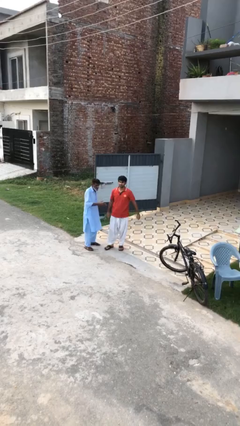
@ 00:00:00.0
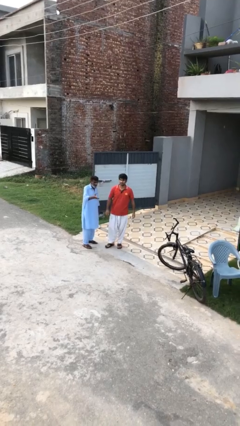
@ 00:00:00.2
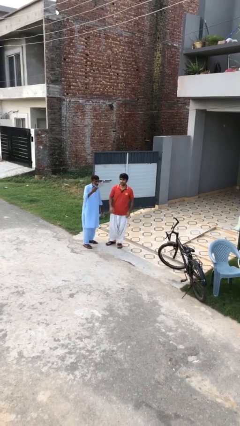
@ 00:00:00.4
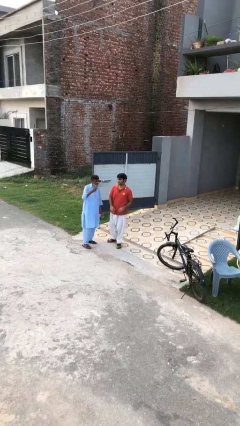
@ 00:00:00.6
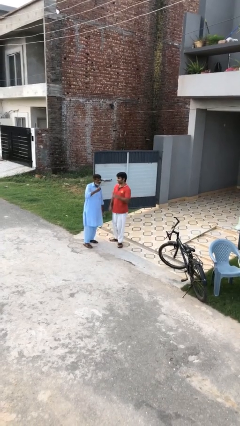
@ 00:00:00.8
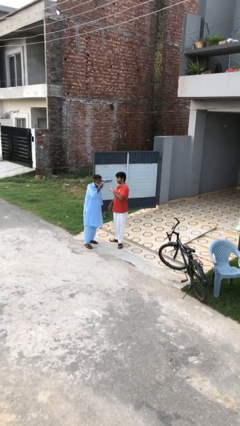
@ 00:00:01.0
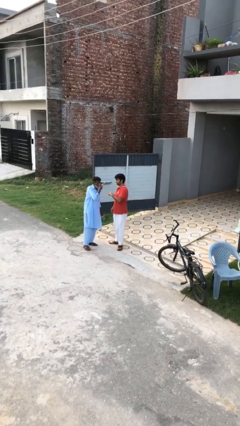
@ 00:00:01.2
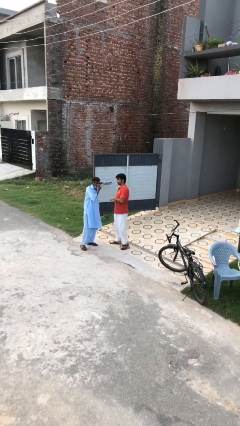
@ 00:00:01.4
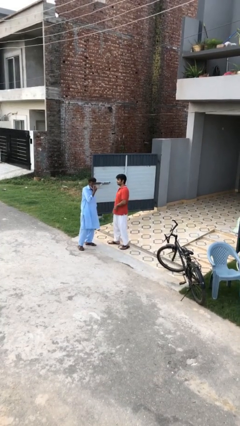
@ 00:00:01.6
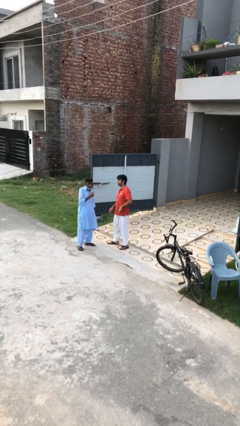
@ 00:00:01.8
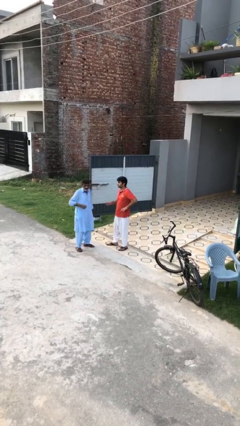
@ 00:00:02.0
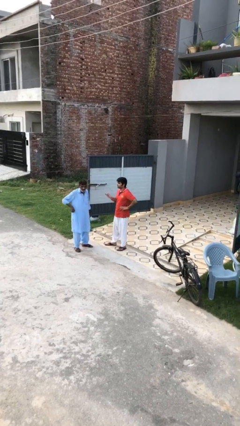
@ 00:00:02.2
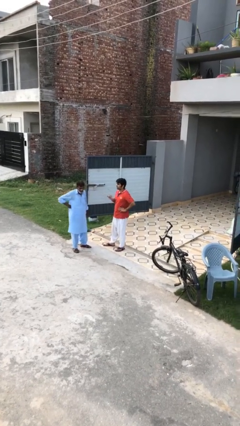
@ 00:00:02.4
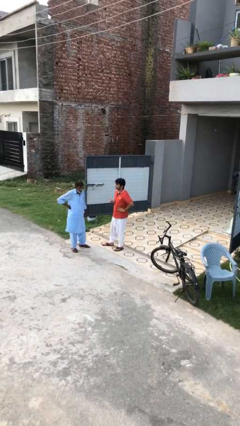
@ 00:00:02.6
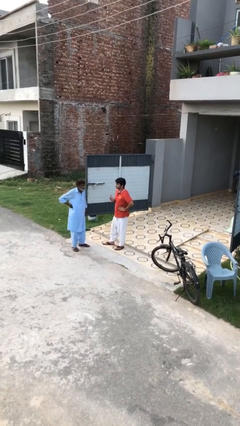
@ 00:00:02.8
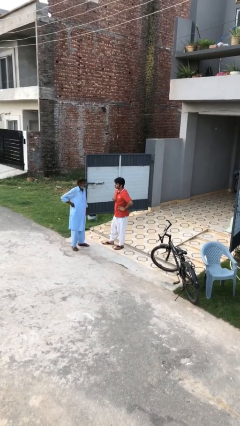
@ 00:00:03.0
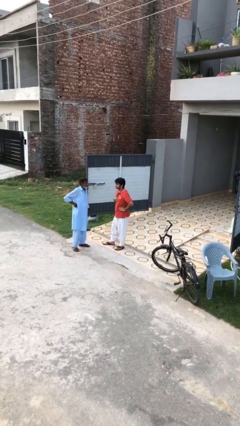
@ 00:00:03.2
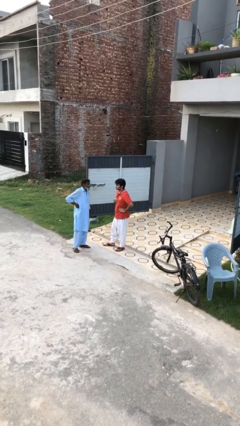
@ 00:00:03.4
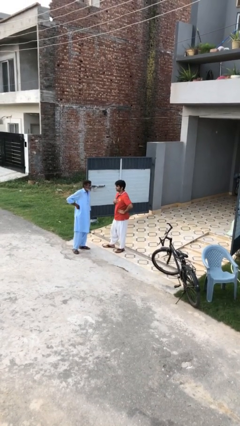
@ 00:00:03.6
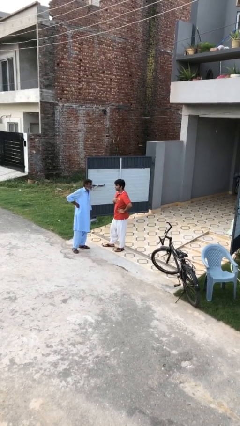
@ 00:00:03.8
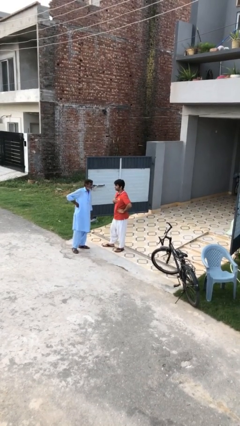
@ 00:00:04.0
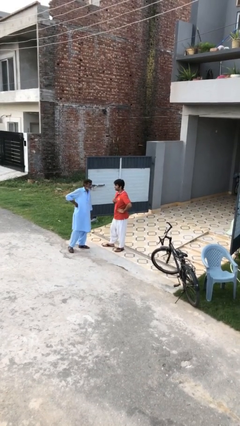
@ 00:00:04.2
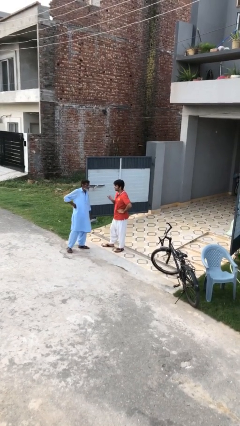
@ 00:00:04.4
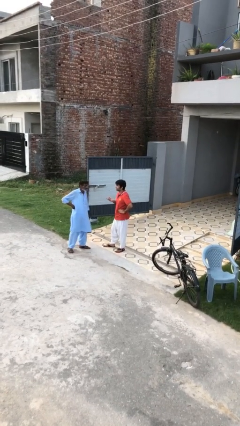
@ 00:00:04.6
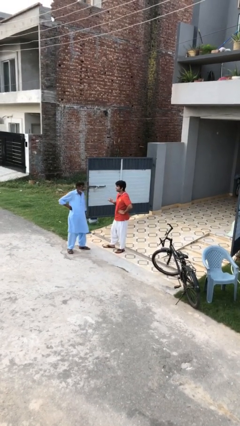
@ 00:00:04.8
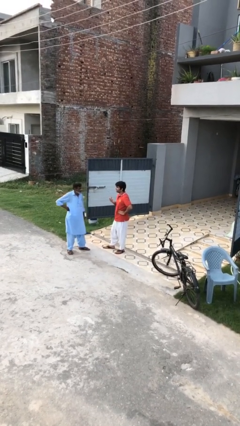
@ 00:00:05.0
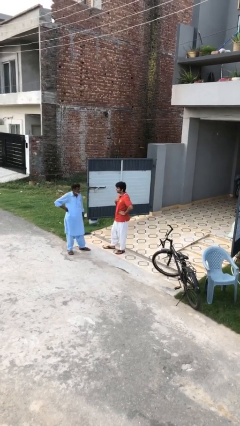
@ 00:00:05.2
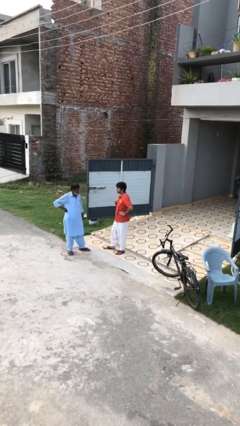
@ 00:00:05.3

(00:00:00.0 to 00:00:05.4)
person talks to person

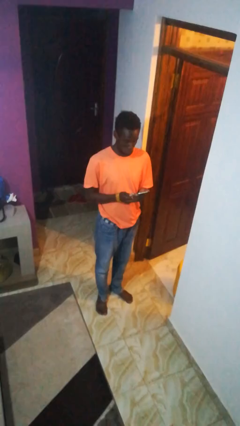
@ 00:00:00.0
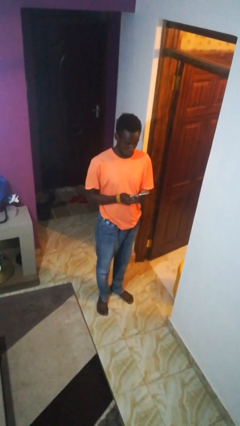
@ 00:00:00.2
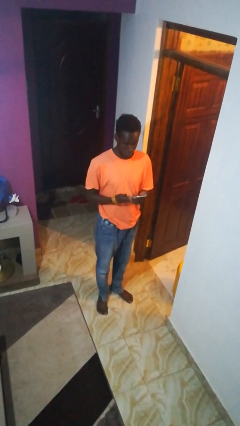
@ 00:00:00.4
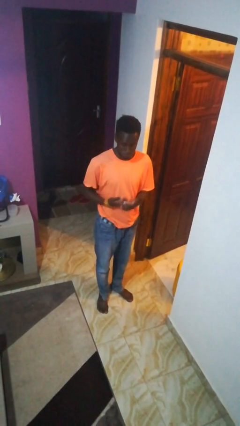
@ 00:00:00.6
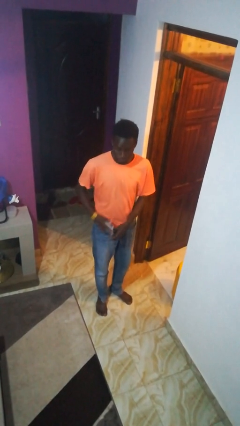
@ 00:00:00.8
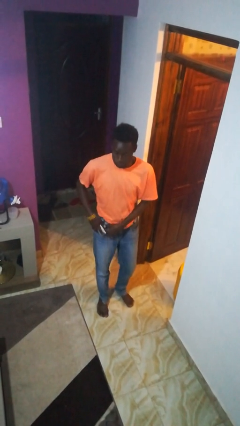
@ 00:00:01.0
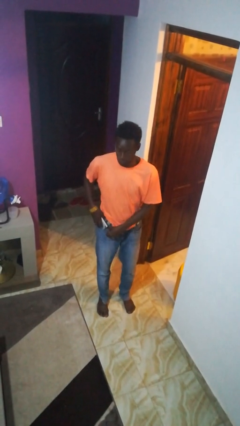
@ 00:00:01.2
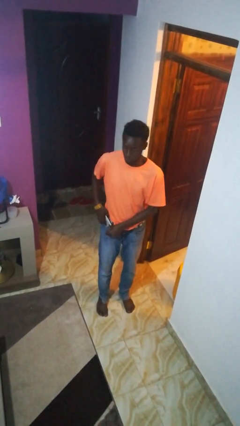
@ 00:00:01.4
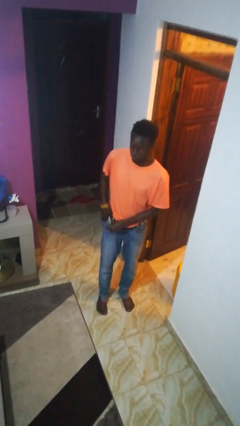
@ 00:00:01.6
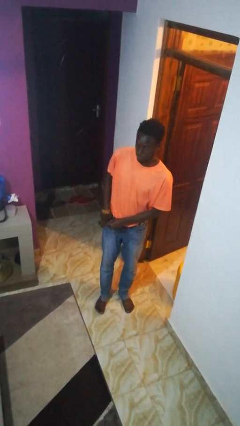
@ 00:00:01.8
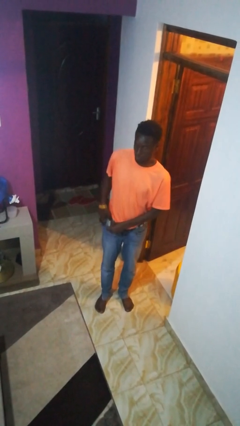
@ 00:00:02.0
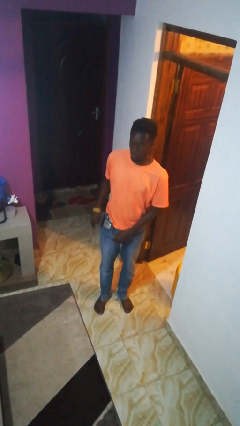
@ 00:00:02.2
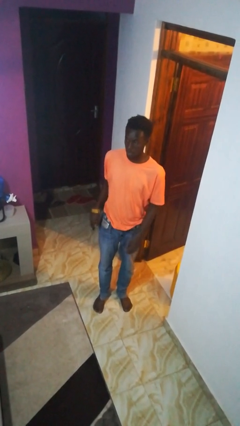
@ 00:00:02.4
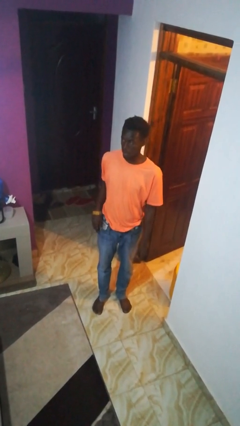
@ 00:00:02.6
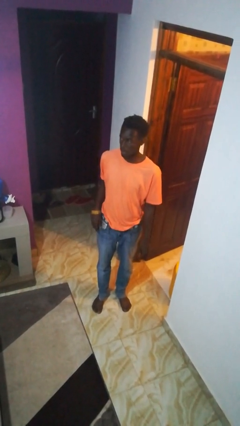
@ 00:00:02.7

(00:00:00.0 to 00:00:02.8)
person puts phone into pocket

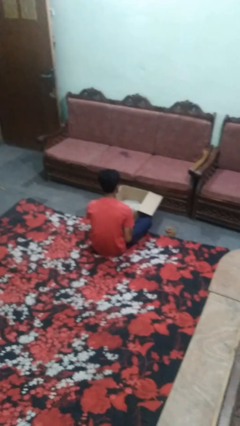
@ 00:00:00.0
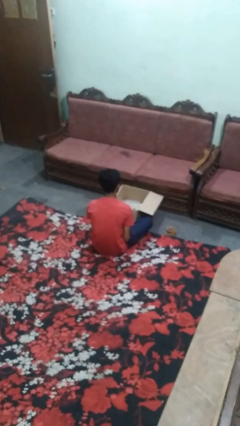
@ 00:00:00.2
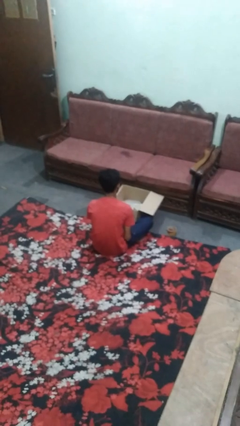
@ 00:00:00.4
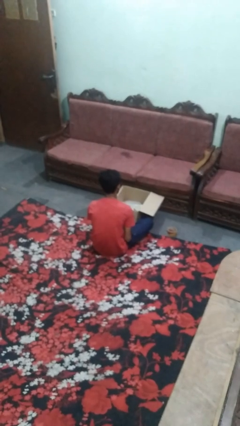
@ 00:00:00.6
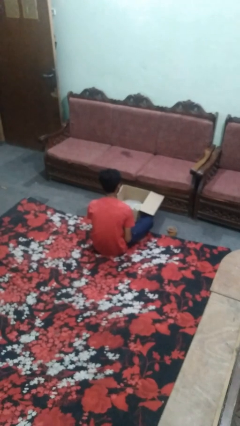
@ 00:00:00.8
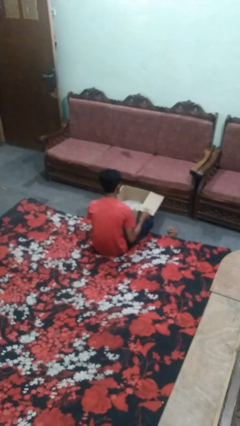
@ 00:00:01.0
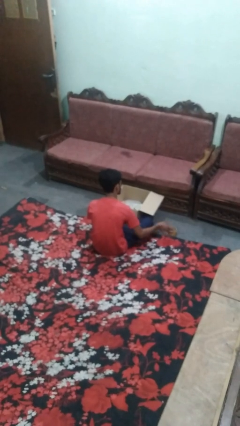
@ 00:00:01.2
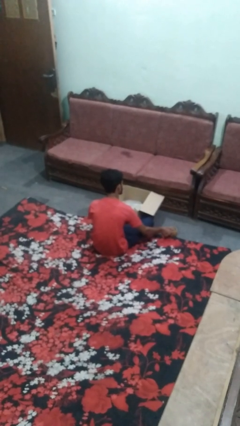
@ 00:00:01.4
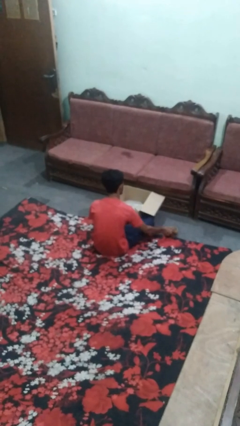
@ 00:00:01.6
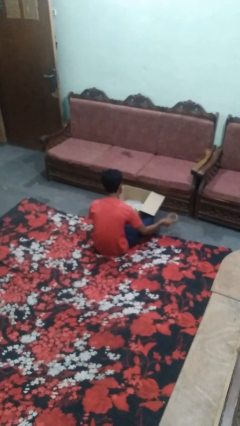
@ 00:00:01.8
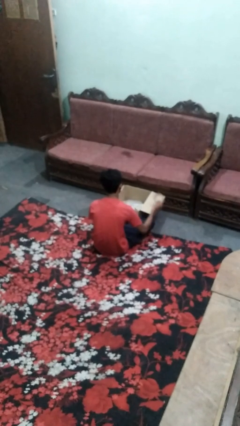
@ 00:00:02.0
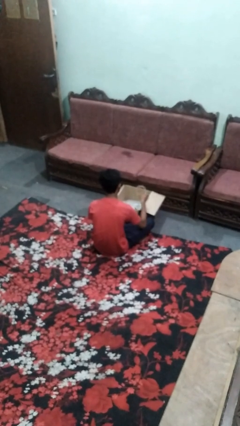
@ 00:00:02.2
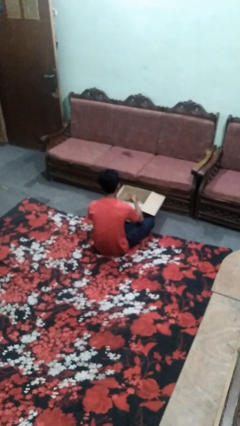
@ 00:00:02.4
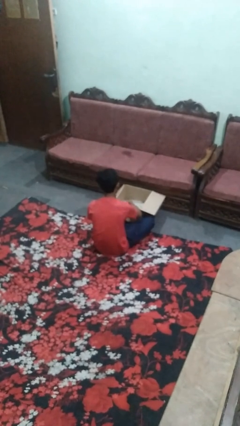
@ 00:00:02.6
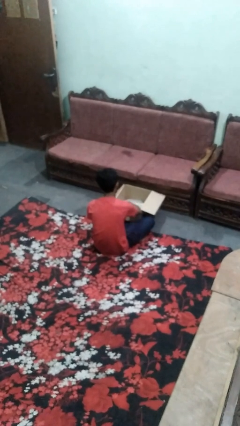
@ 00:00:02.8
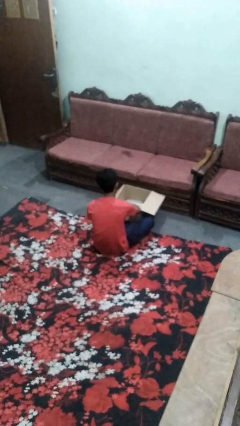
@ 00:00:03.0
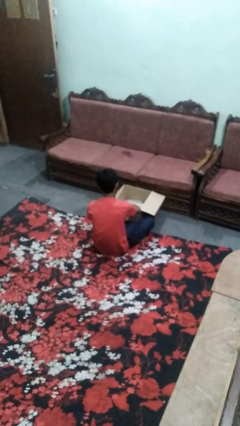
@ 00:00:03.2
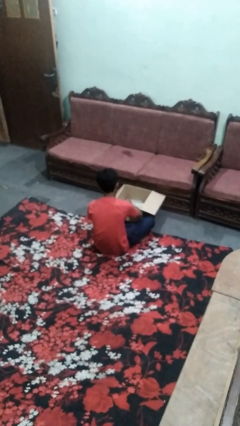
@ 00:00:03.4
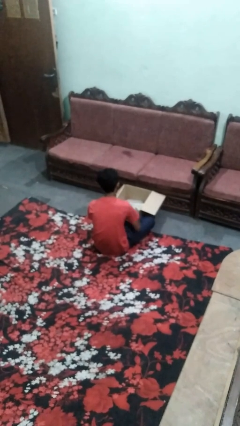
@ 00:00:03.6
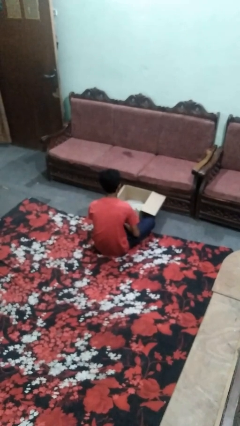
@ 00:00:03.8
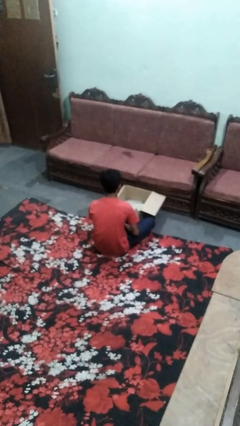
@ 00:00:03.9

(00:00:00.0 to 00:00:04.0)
person puts object into box

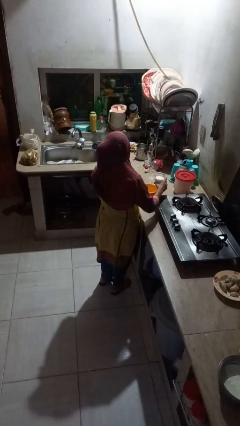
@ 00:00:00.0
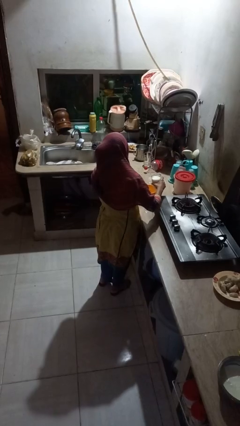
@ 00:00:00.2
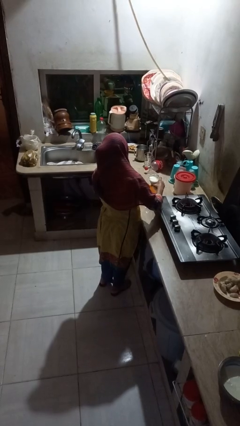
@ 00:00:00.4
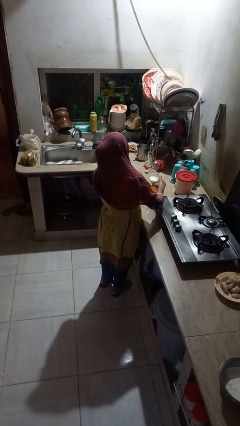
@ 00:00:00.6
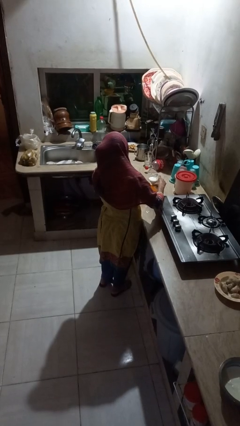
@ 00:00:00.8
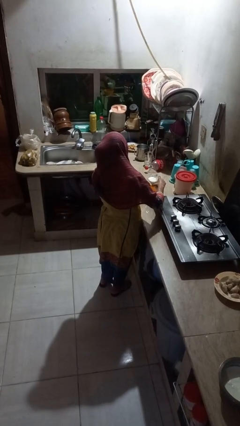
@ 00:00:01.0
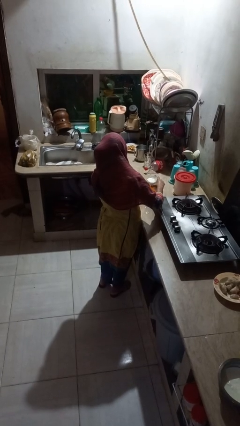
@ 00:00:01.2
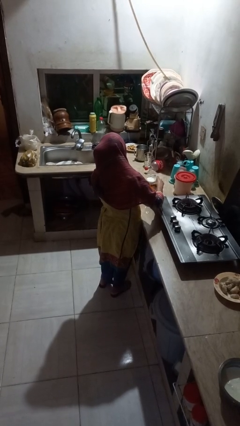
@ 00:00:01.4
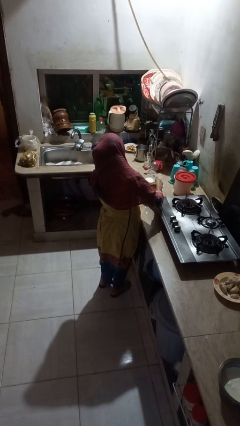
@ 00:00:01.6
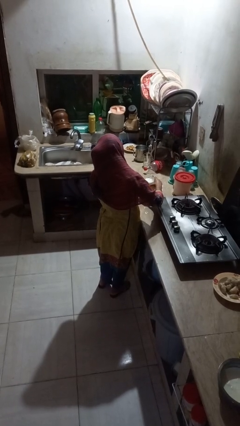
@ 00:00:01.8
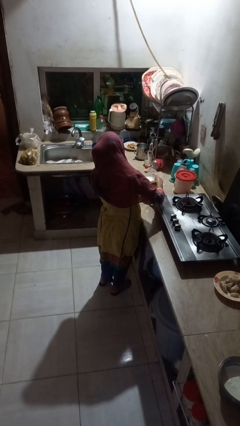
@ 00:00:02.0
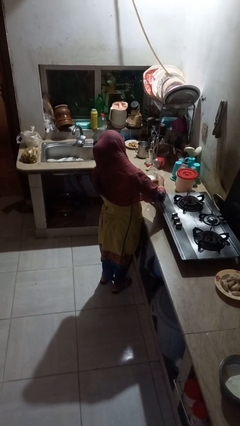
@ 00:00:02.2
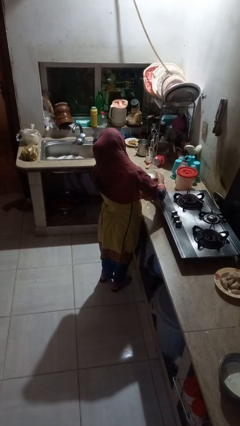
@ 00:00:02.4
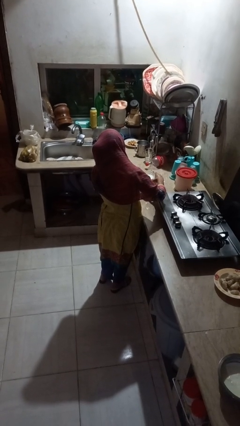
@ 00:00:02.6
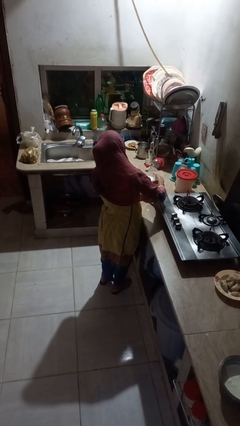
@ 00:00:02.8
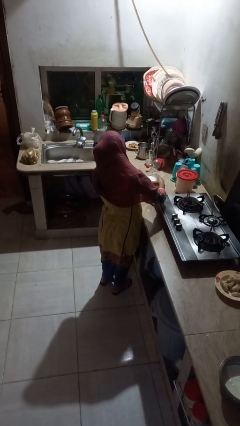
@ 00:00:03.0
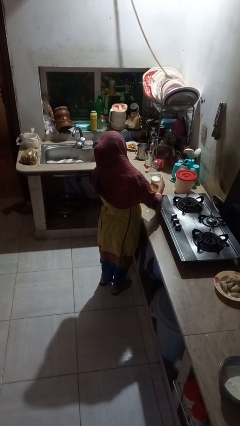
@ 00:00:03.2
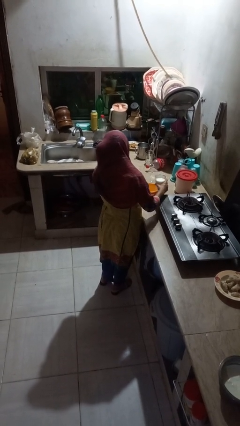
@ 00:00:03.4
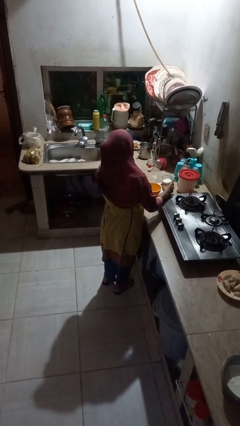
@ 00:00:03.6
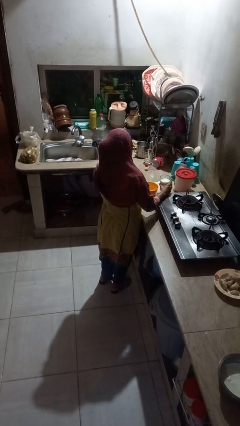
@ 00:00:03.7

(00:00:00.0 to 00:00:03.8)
person pours into bowl

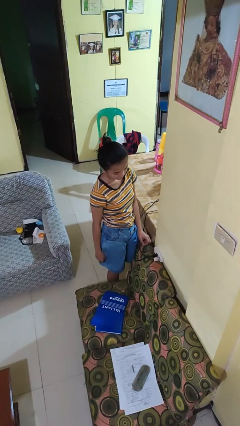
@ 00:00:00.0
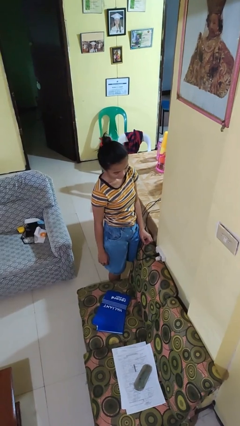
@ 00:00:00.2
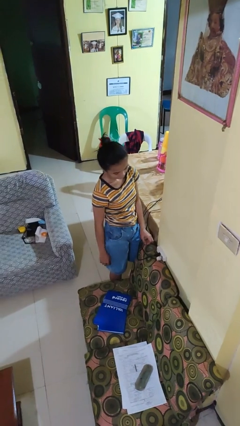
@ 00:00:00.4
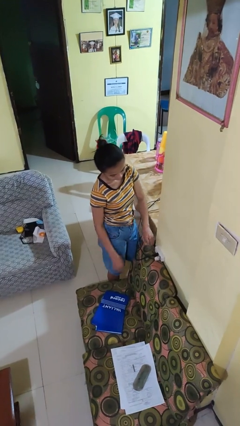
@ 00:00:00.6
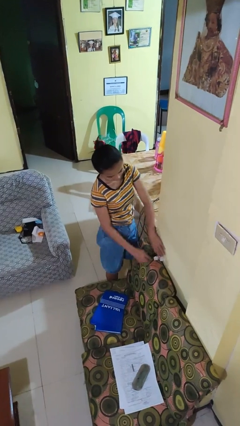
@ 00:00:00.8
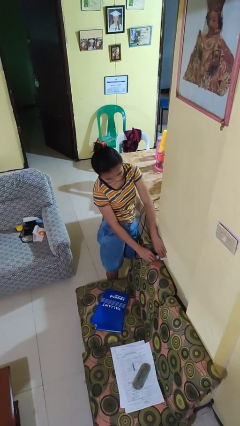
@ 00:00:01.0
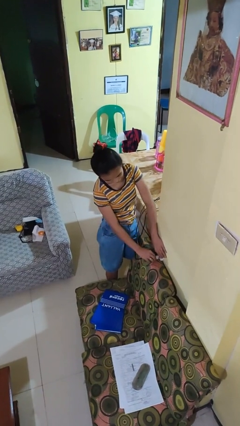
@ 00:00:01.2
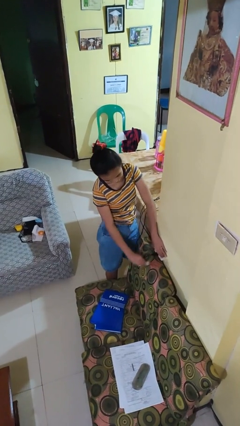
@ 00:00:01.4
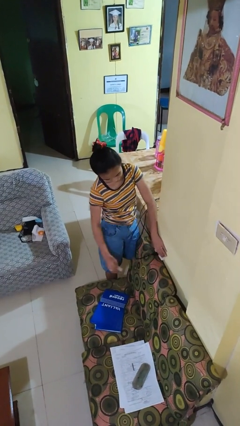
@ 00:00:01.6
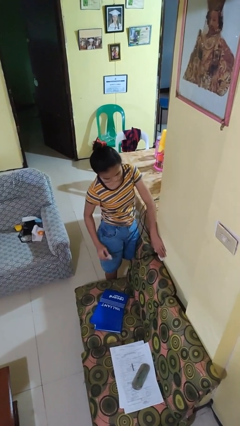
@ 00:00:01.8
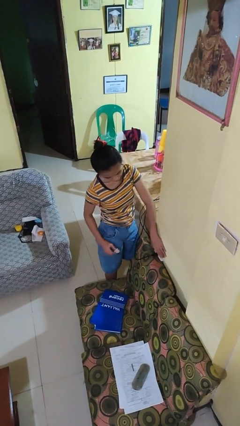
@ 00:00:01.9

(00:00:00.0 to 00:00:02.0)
person unplugs from electrical socket
